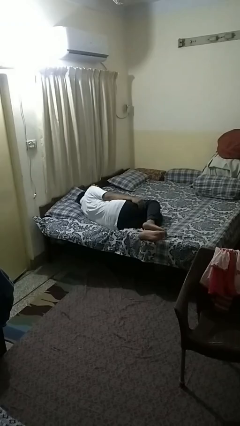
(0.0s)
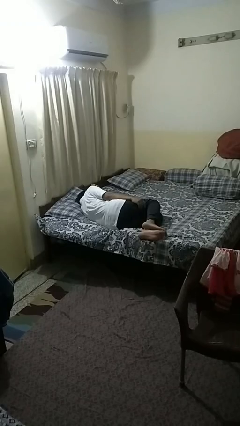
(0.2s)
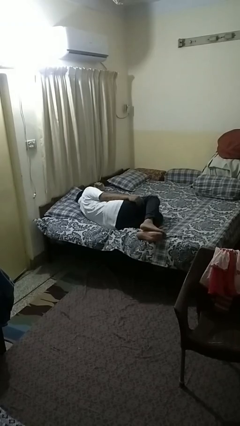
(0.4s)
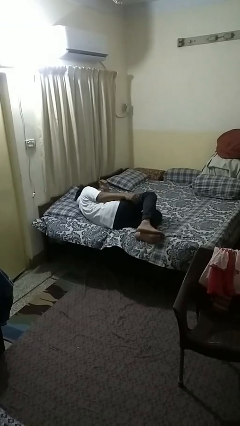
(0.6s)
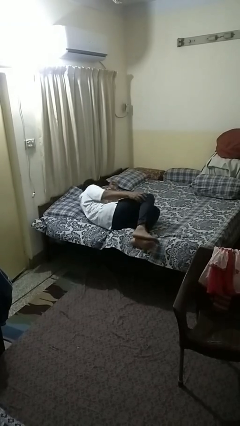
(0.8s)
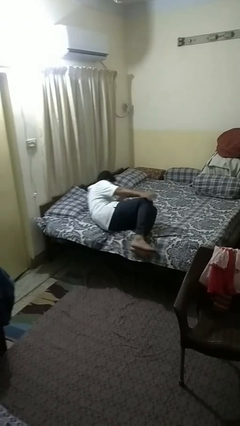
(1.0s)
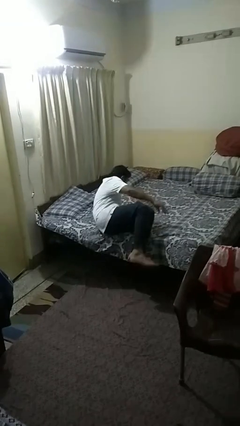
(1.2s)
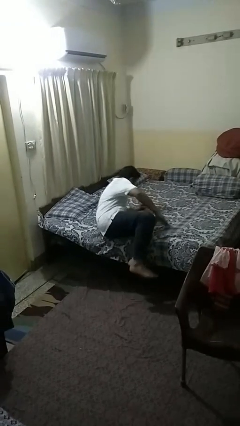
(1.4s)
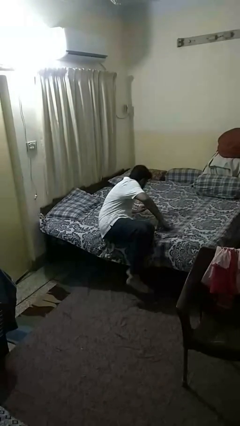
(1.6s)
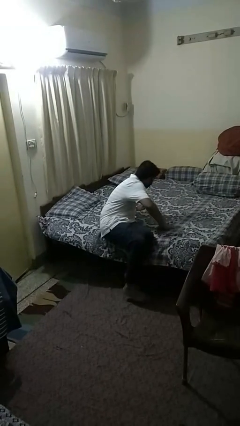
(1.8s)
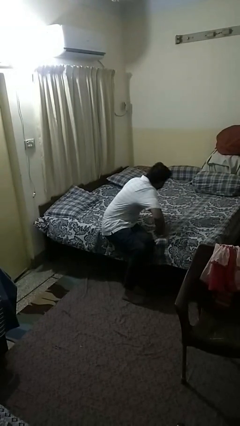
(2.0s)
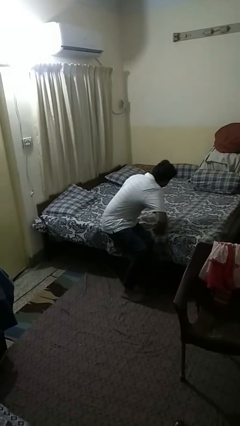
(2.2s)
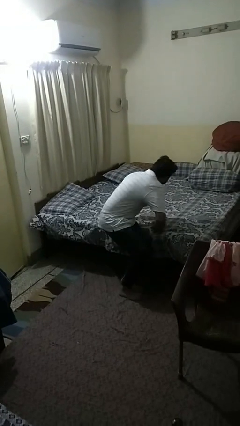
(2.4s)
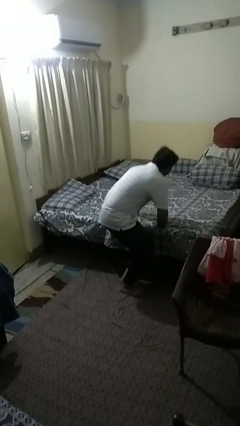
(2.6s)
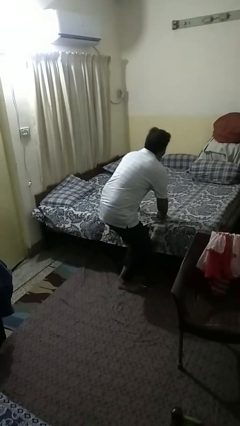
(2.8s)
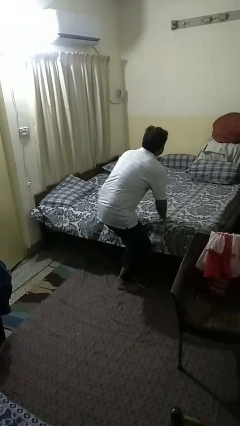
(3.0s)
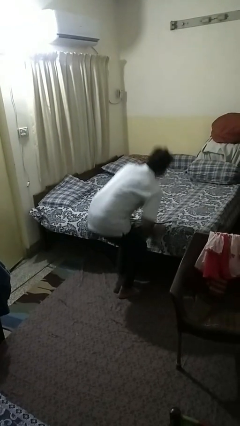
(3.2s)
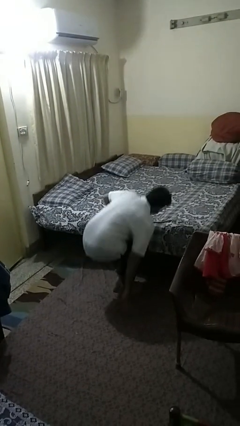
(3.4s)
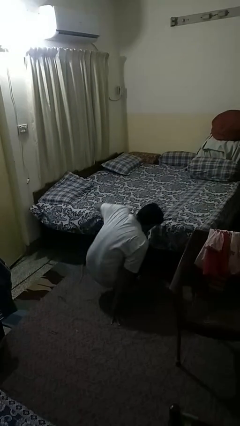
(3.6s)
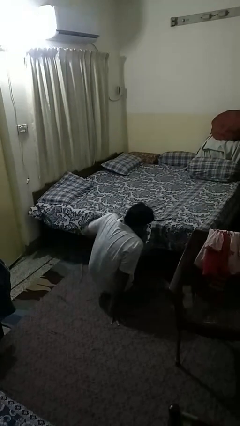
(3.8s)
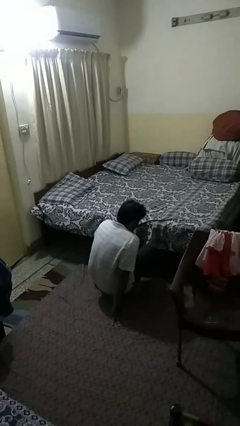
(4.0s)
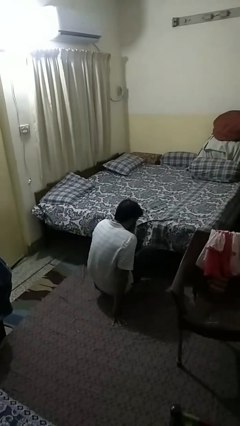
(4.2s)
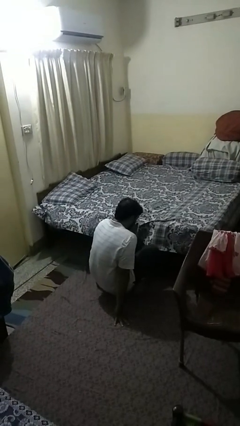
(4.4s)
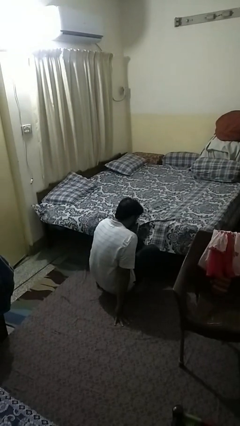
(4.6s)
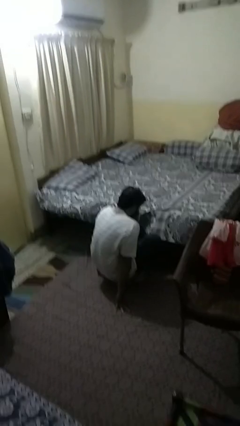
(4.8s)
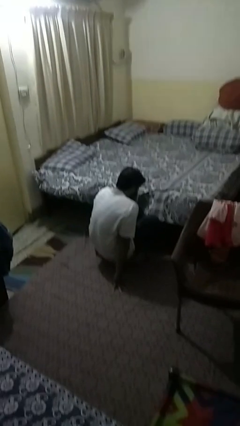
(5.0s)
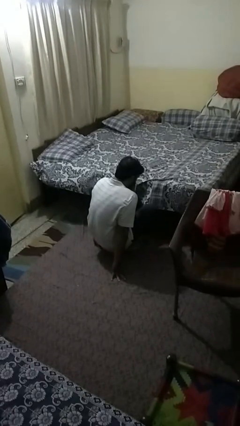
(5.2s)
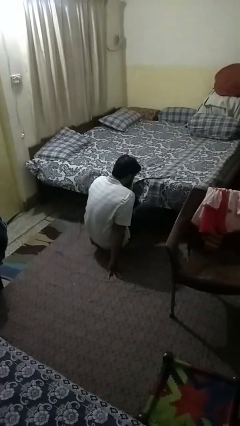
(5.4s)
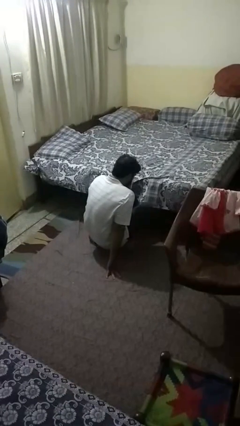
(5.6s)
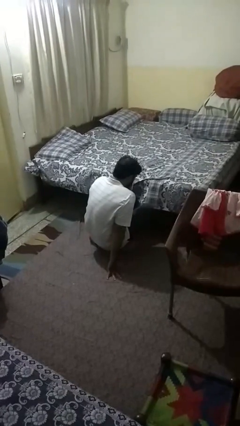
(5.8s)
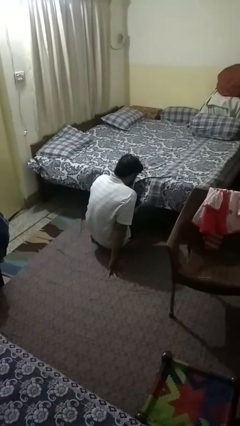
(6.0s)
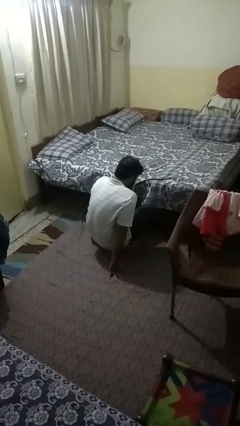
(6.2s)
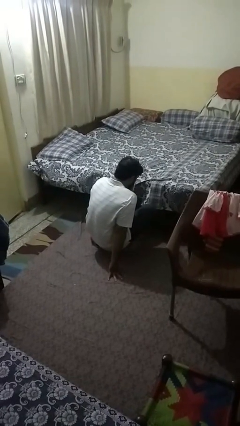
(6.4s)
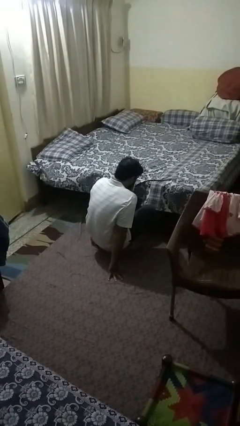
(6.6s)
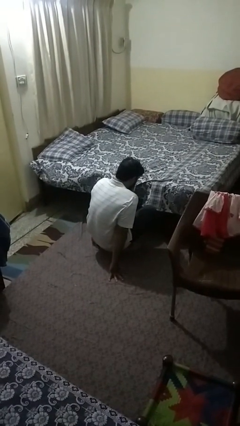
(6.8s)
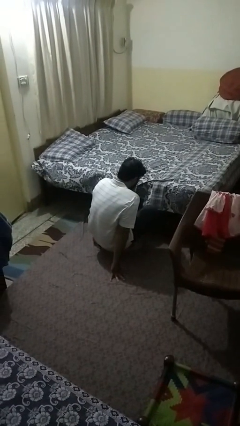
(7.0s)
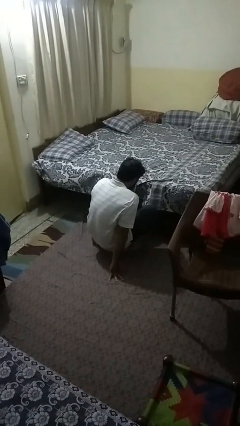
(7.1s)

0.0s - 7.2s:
person falls from bed

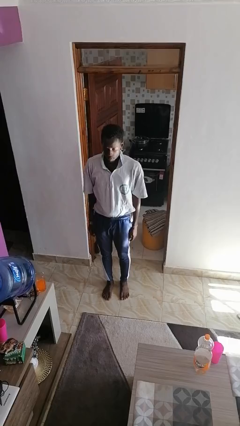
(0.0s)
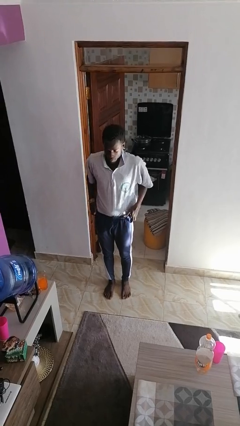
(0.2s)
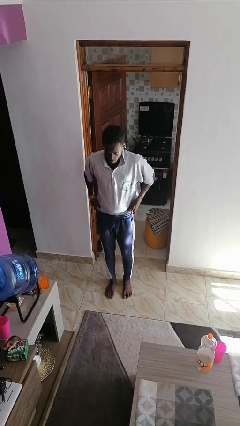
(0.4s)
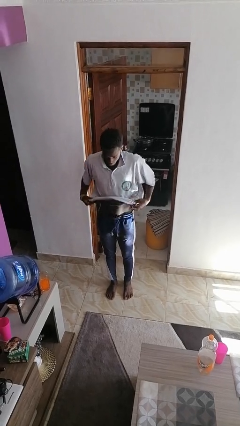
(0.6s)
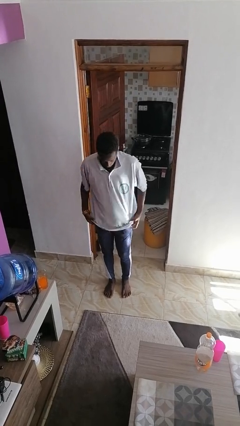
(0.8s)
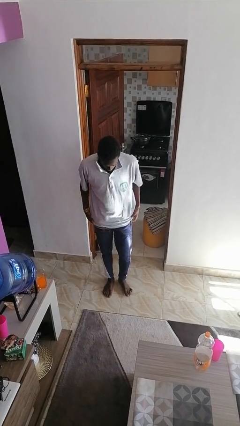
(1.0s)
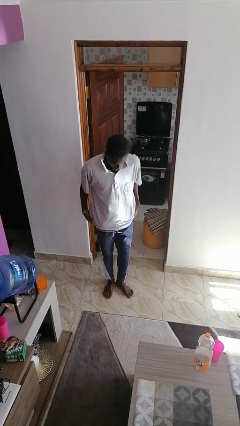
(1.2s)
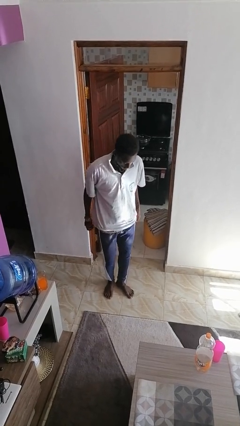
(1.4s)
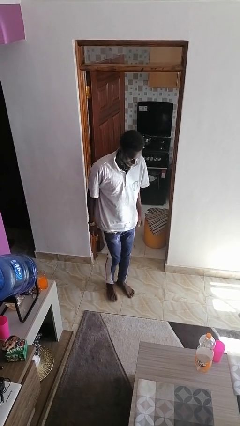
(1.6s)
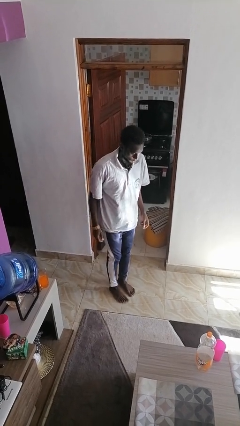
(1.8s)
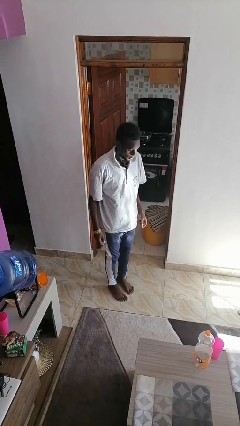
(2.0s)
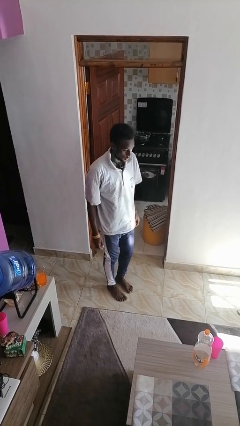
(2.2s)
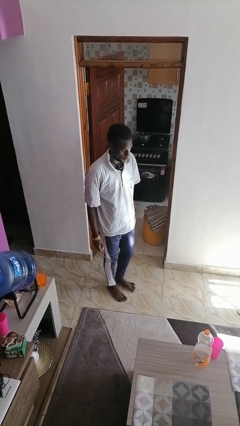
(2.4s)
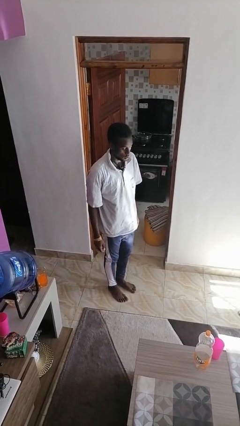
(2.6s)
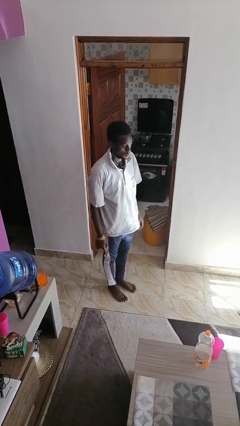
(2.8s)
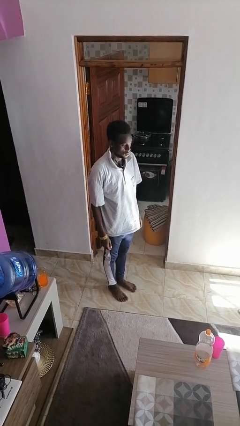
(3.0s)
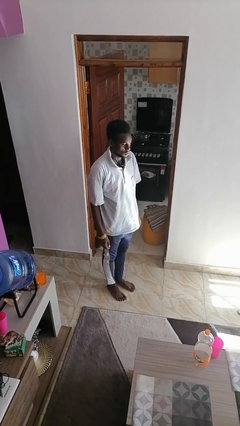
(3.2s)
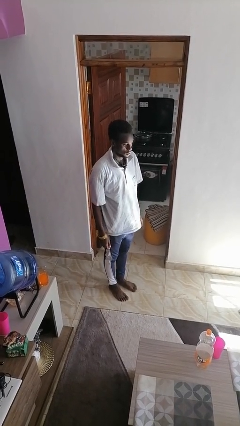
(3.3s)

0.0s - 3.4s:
person untucks shirt

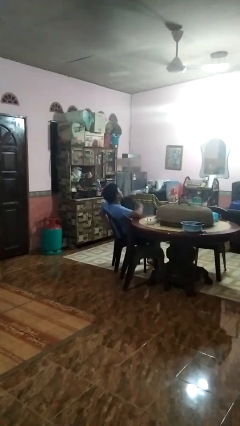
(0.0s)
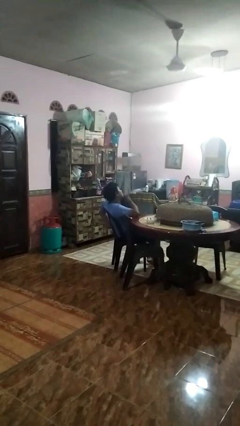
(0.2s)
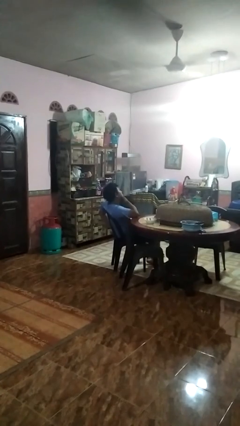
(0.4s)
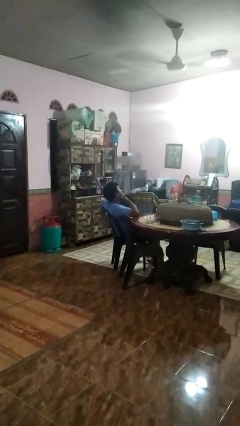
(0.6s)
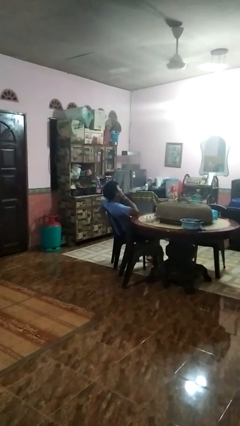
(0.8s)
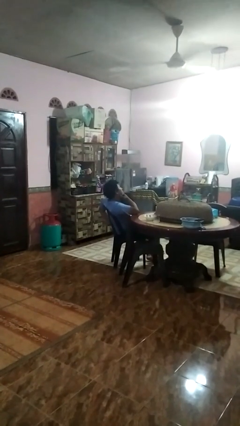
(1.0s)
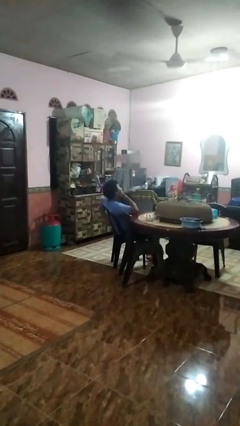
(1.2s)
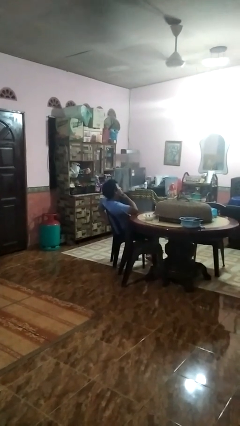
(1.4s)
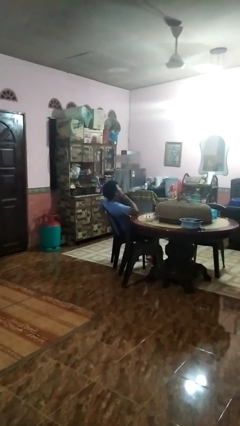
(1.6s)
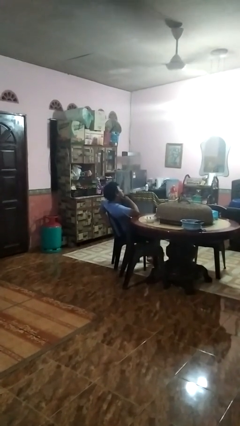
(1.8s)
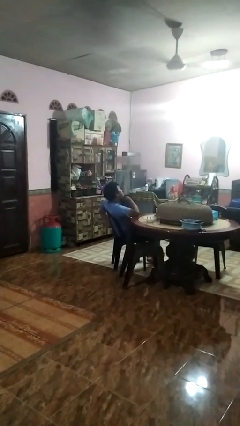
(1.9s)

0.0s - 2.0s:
person strokes chin

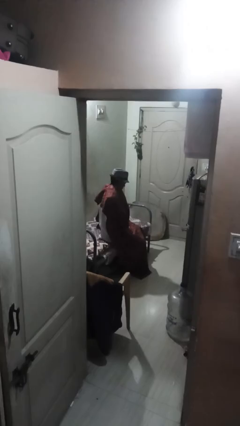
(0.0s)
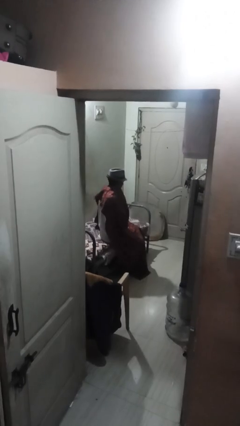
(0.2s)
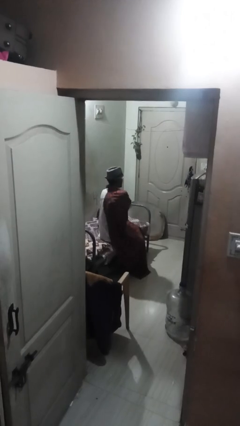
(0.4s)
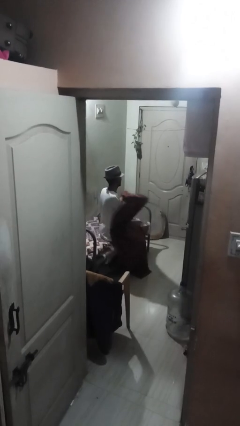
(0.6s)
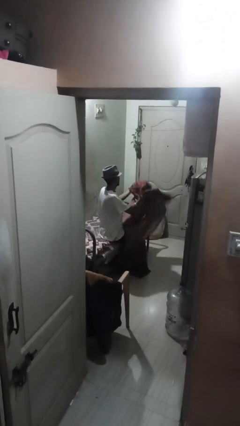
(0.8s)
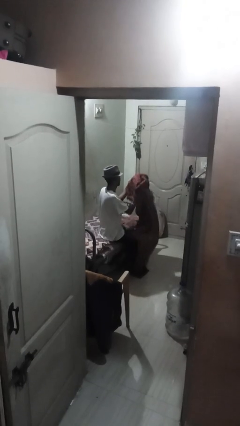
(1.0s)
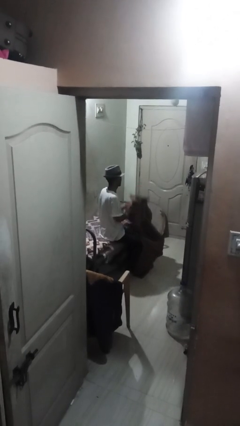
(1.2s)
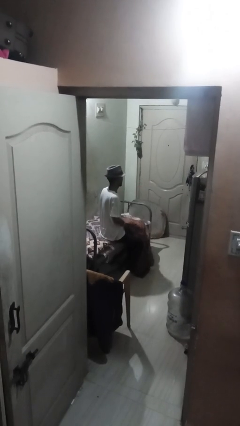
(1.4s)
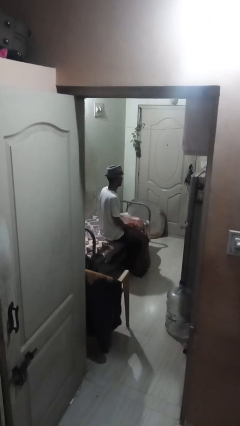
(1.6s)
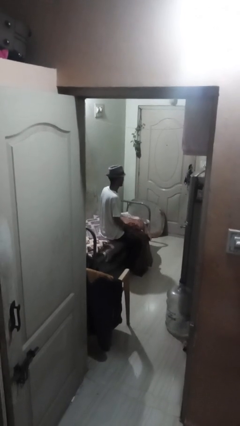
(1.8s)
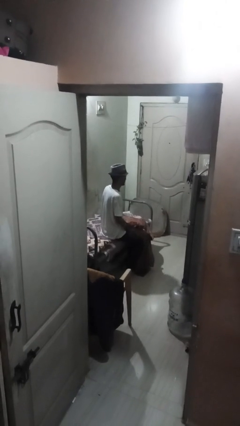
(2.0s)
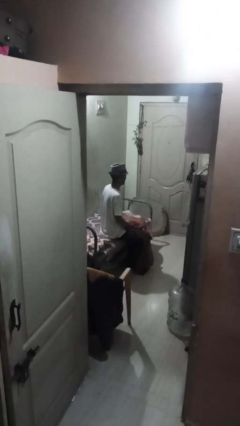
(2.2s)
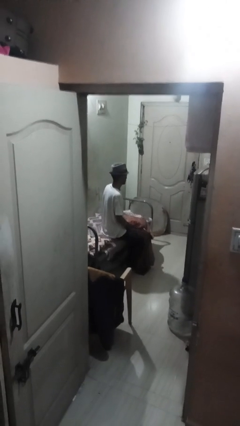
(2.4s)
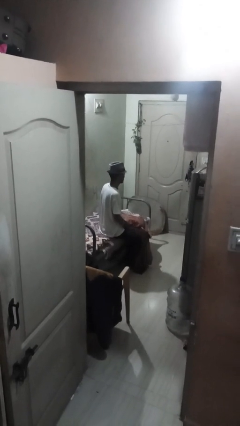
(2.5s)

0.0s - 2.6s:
person uncovers with blanket

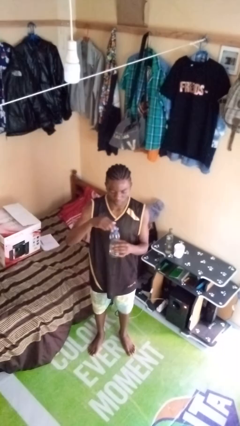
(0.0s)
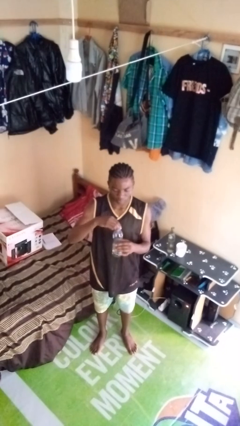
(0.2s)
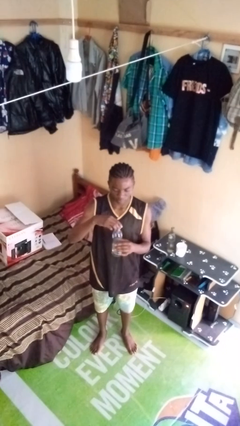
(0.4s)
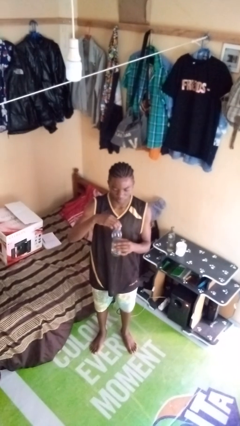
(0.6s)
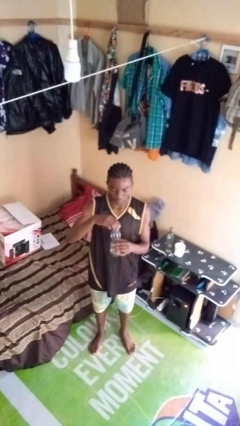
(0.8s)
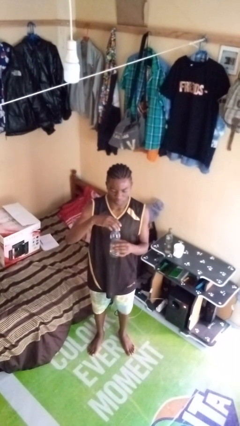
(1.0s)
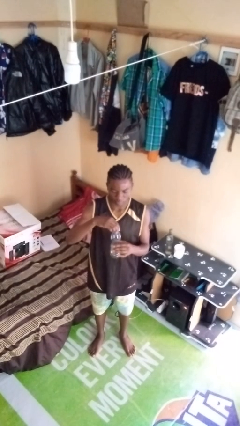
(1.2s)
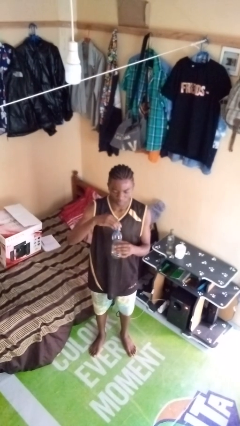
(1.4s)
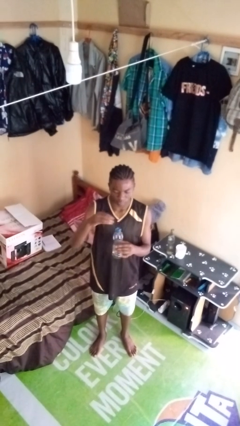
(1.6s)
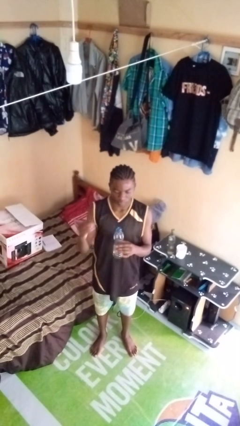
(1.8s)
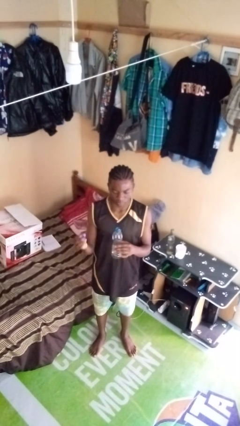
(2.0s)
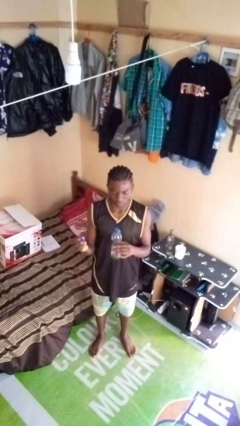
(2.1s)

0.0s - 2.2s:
person unscrews lid from bottle
